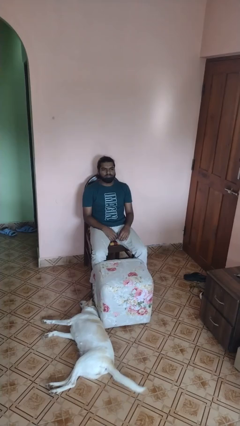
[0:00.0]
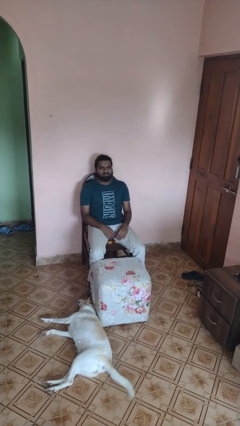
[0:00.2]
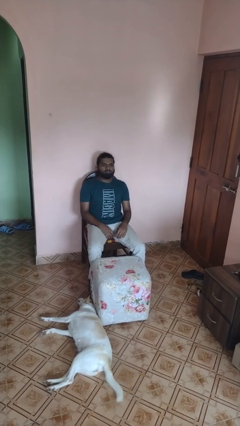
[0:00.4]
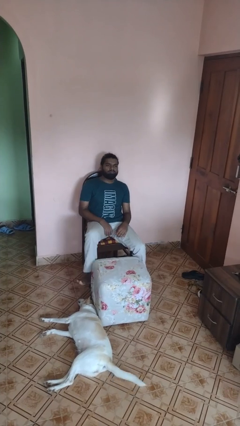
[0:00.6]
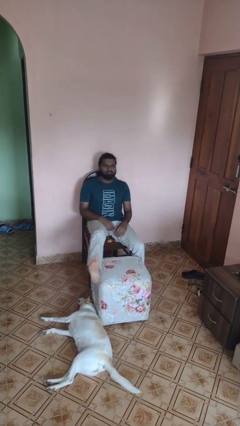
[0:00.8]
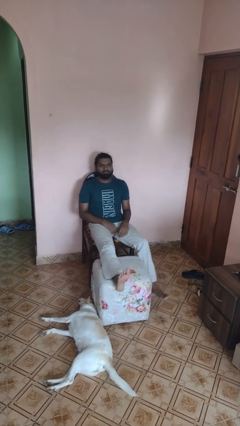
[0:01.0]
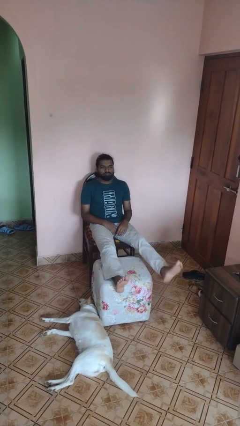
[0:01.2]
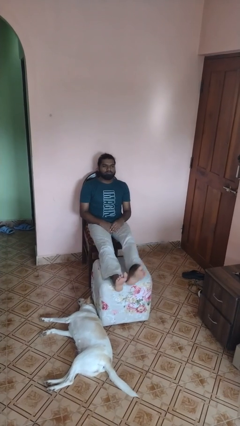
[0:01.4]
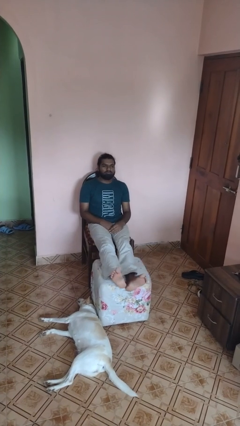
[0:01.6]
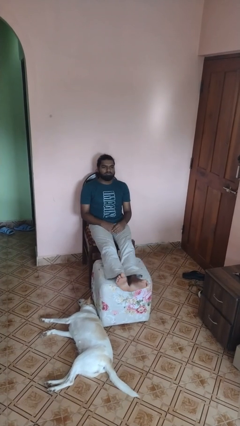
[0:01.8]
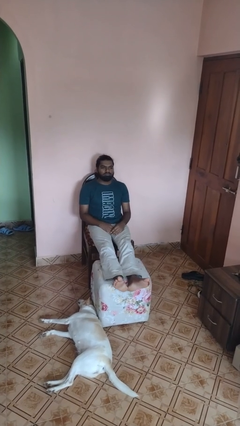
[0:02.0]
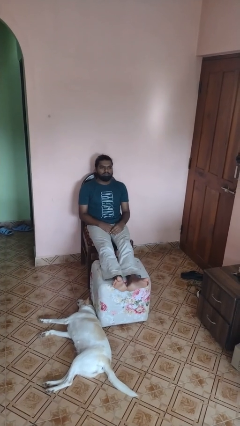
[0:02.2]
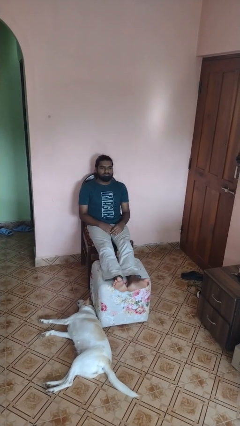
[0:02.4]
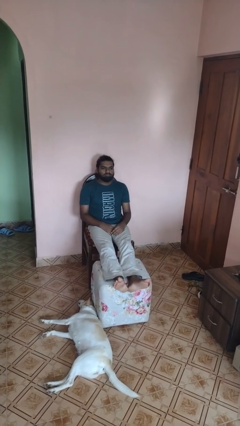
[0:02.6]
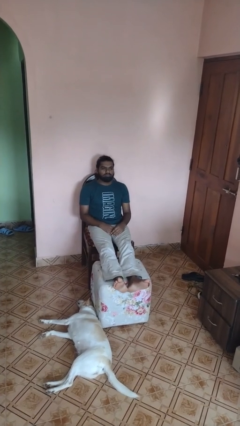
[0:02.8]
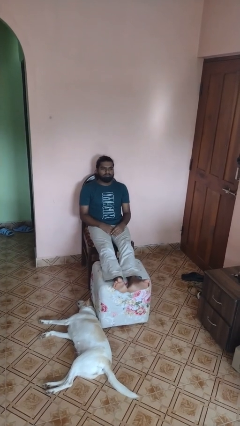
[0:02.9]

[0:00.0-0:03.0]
person puts feet up

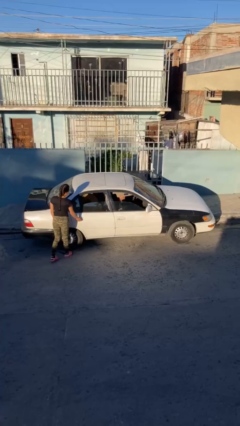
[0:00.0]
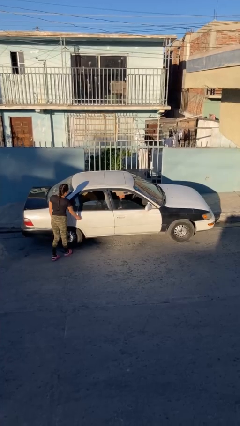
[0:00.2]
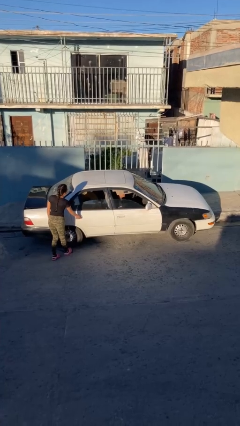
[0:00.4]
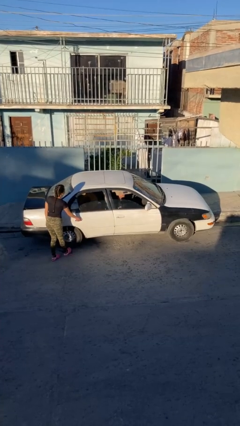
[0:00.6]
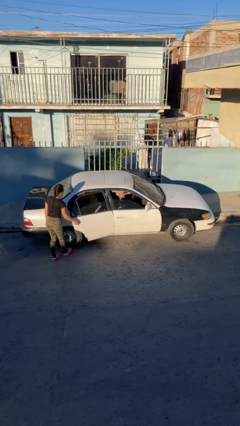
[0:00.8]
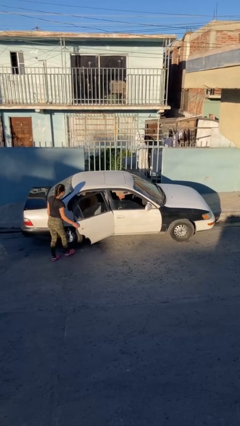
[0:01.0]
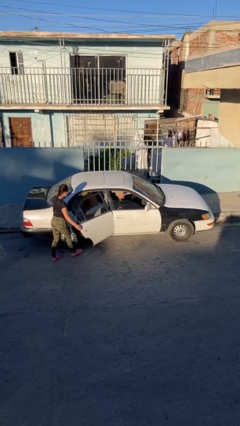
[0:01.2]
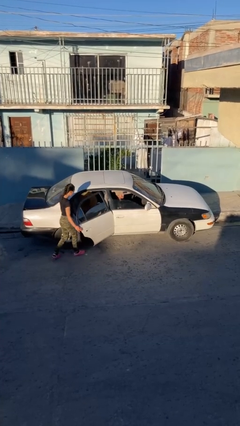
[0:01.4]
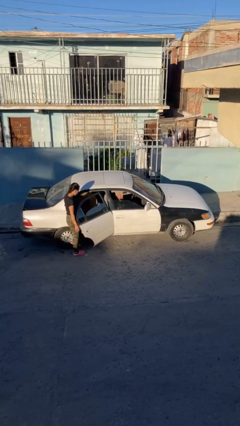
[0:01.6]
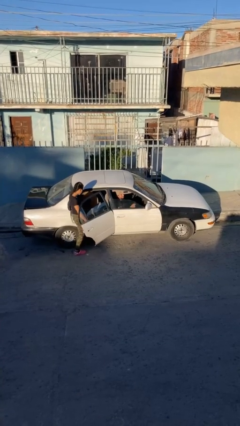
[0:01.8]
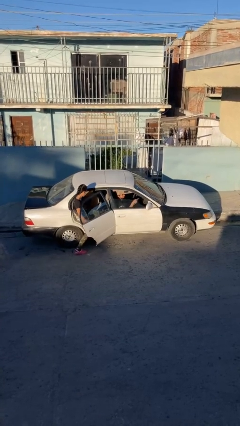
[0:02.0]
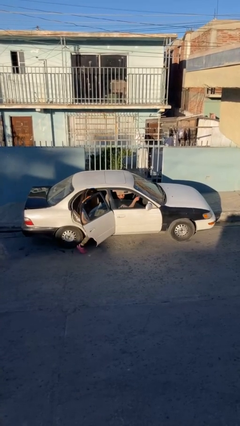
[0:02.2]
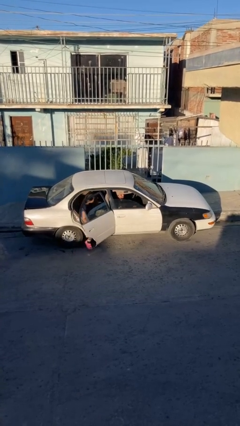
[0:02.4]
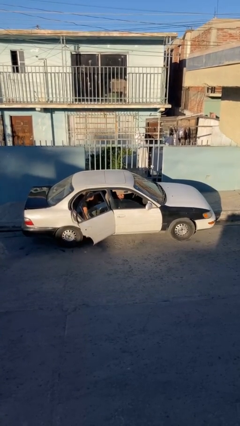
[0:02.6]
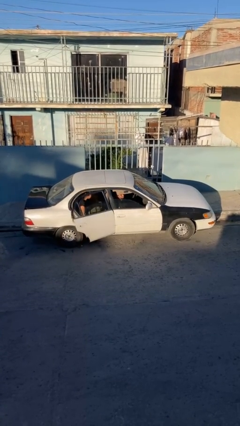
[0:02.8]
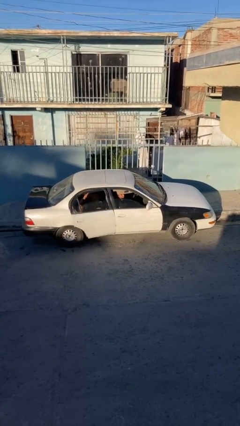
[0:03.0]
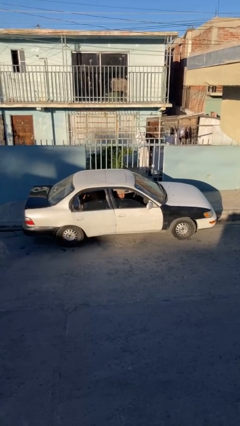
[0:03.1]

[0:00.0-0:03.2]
car picks up person

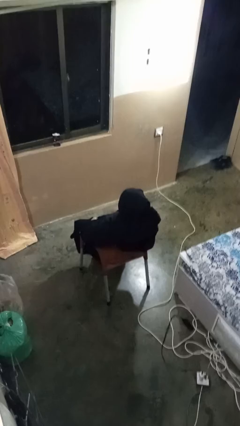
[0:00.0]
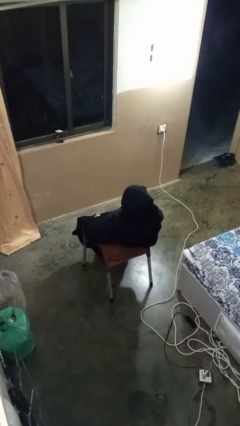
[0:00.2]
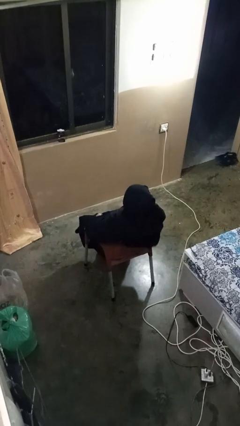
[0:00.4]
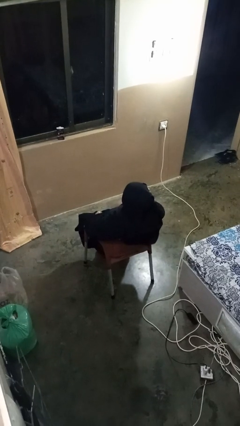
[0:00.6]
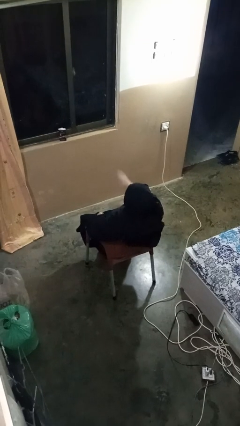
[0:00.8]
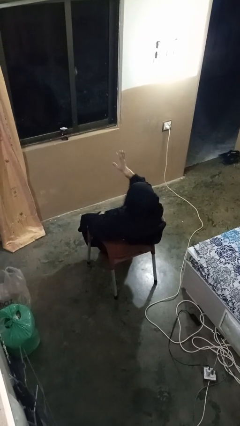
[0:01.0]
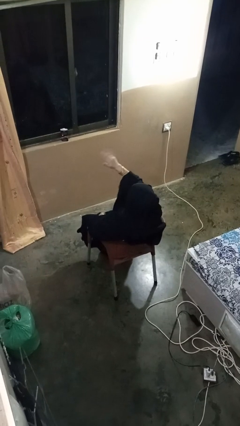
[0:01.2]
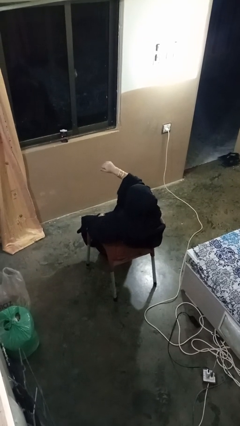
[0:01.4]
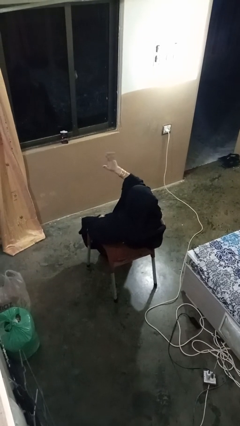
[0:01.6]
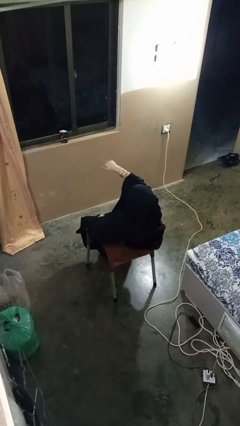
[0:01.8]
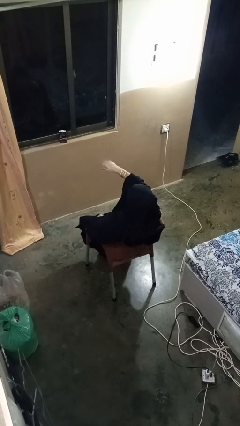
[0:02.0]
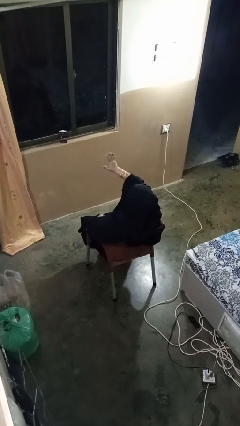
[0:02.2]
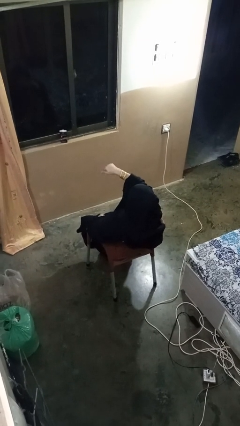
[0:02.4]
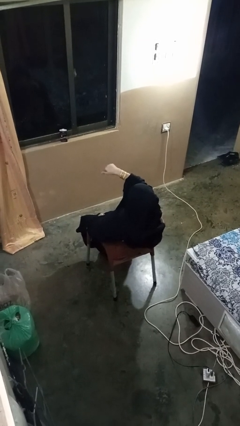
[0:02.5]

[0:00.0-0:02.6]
person gestures come here

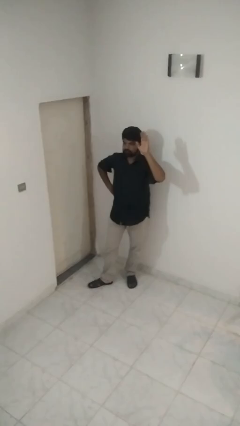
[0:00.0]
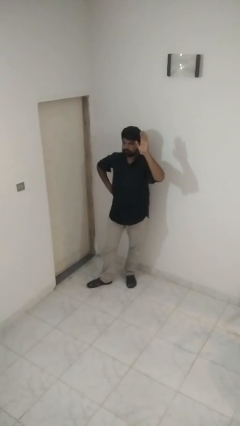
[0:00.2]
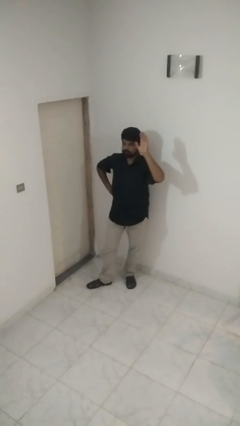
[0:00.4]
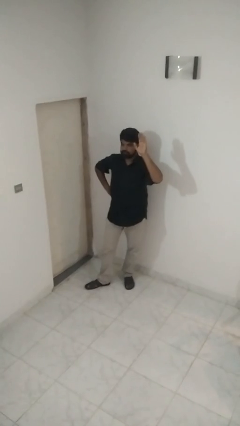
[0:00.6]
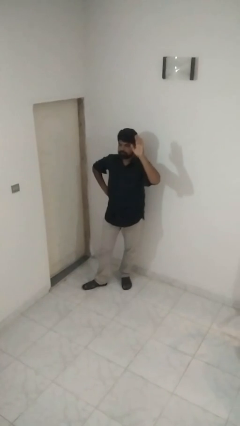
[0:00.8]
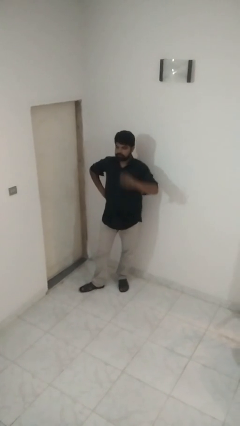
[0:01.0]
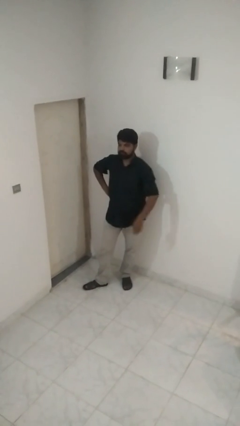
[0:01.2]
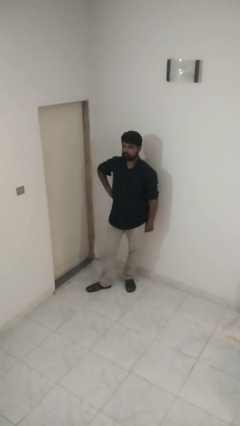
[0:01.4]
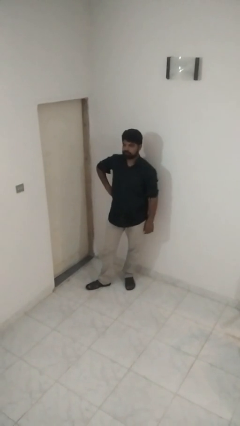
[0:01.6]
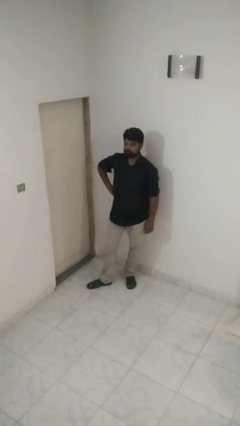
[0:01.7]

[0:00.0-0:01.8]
person gestures lower hand

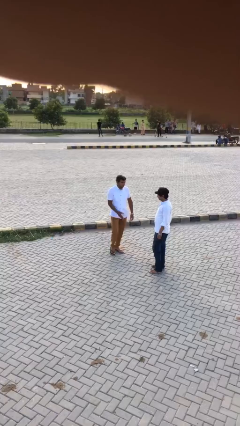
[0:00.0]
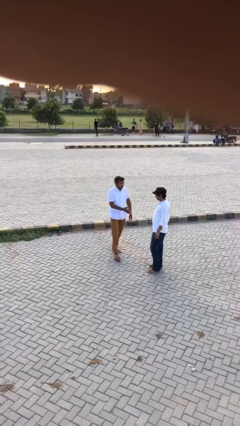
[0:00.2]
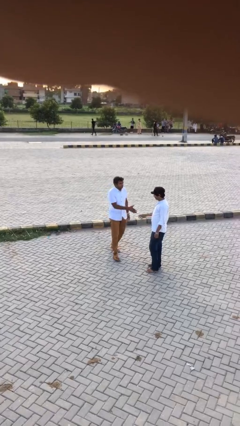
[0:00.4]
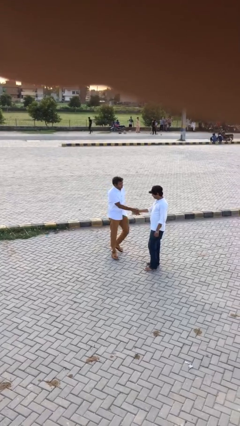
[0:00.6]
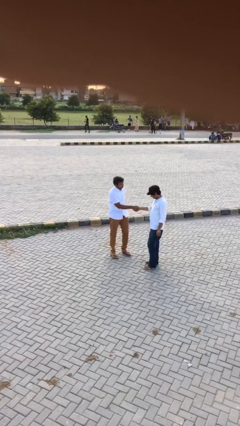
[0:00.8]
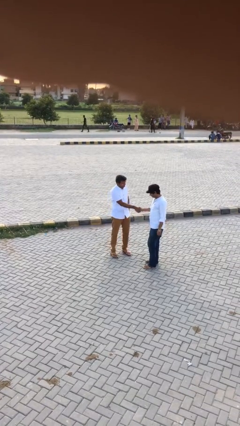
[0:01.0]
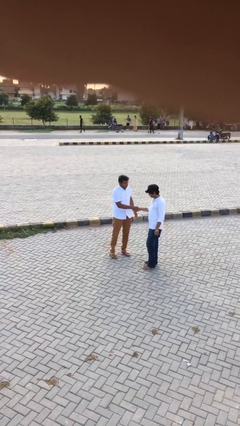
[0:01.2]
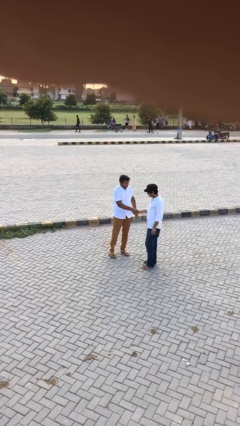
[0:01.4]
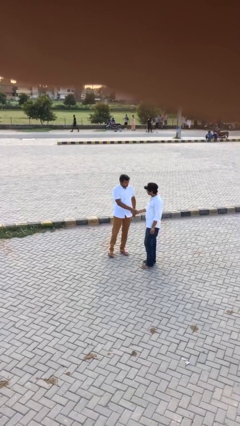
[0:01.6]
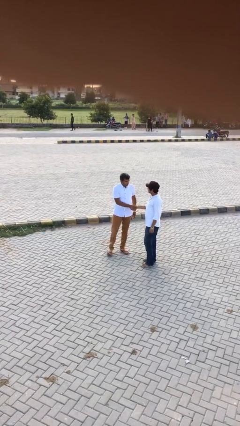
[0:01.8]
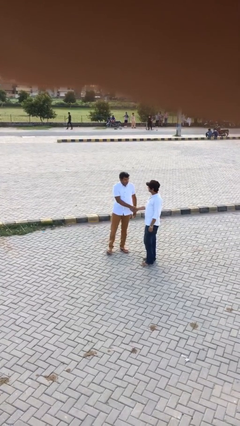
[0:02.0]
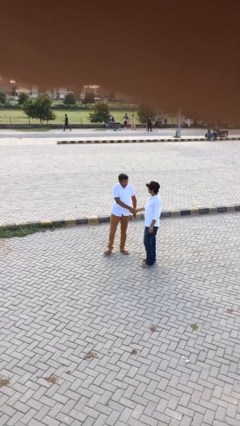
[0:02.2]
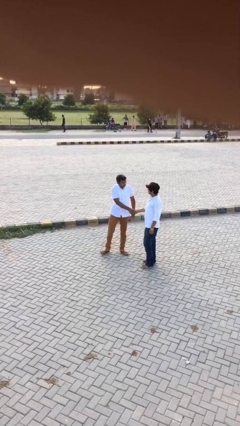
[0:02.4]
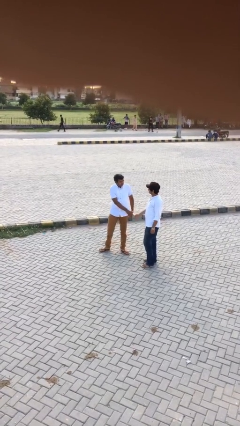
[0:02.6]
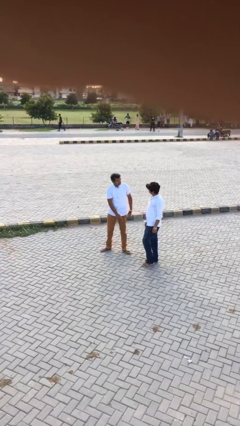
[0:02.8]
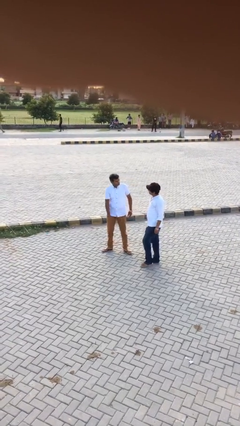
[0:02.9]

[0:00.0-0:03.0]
person shakes hand

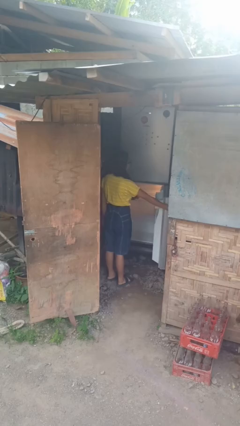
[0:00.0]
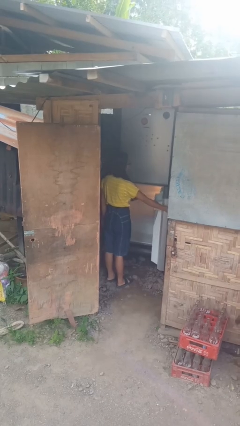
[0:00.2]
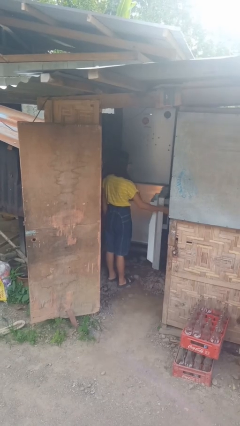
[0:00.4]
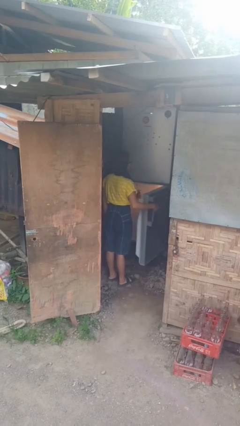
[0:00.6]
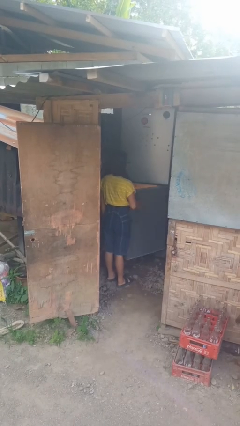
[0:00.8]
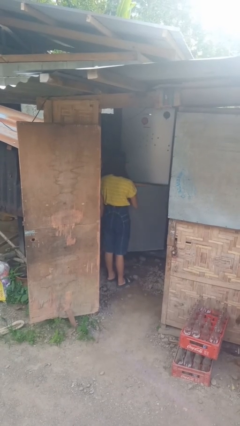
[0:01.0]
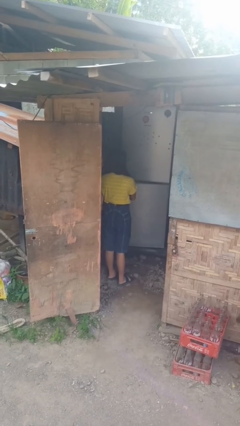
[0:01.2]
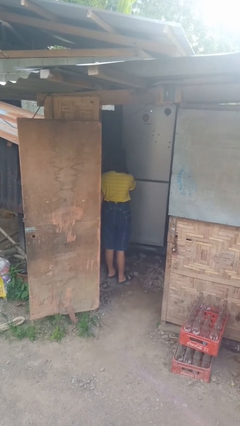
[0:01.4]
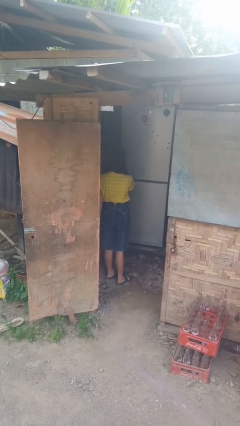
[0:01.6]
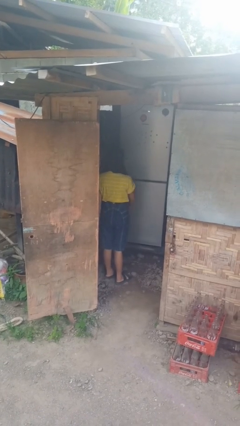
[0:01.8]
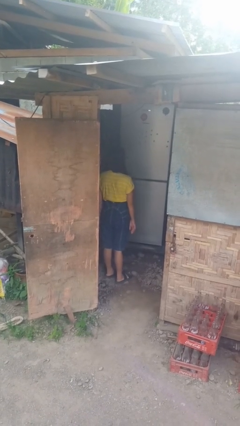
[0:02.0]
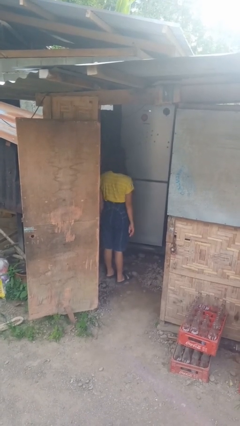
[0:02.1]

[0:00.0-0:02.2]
person closes refrigerator

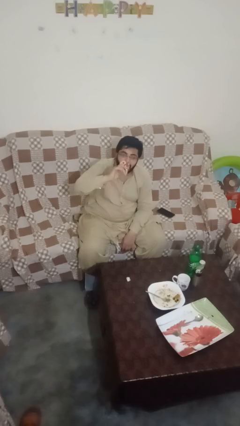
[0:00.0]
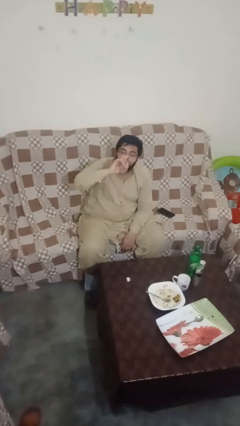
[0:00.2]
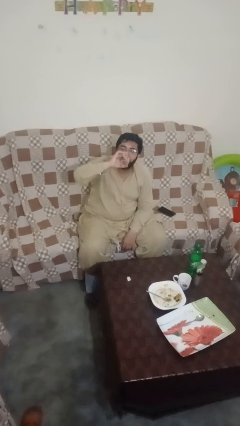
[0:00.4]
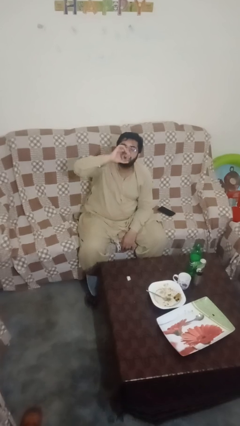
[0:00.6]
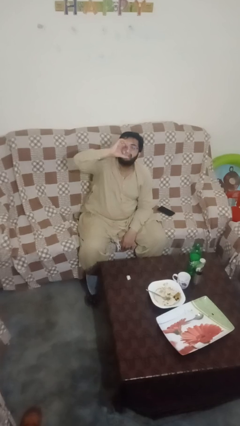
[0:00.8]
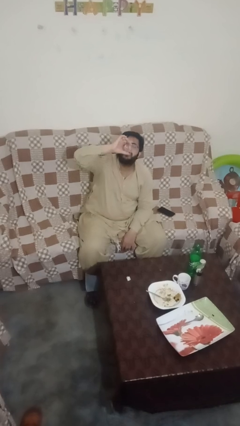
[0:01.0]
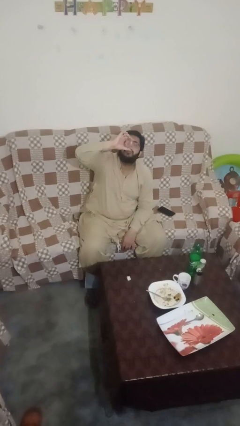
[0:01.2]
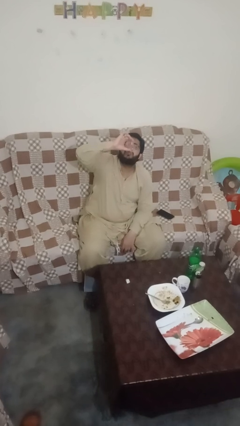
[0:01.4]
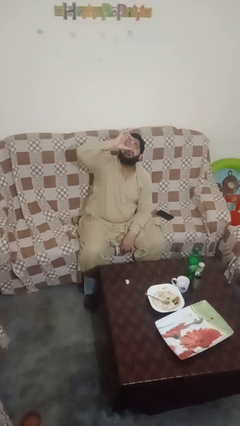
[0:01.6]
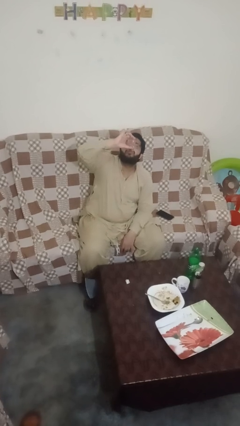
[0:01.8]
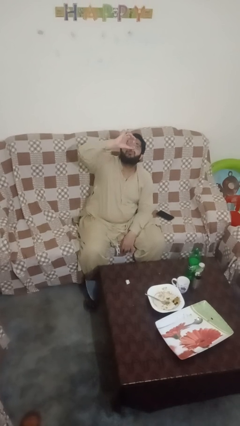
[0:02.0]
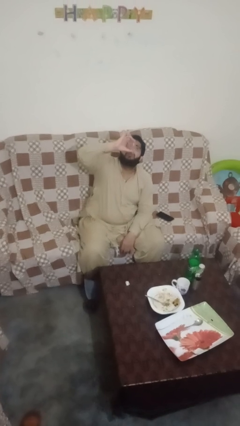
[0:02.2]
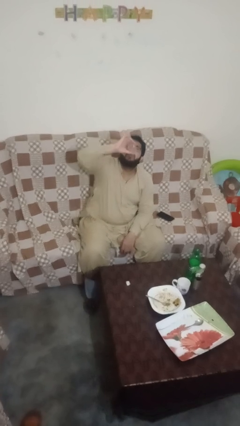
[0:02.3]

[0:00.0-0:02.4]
person drinks from shotglass
